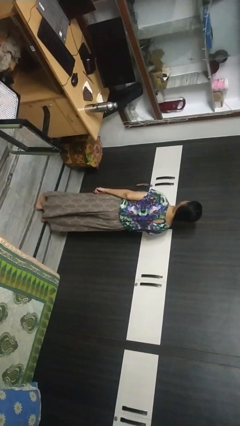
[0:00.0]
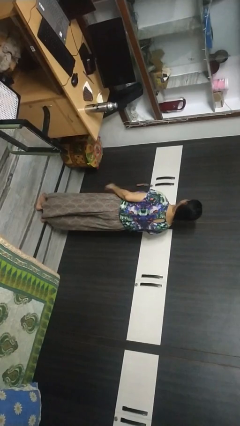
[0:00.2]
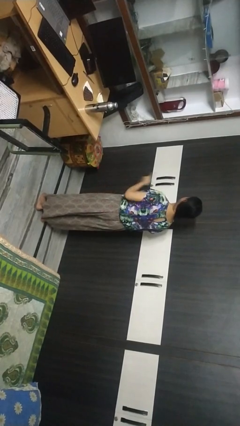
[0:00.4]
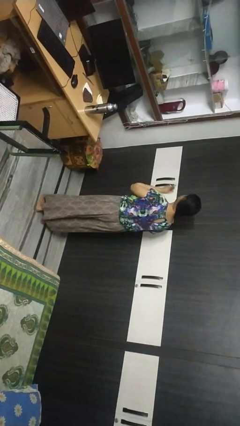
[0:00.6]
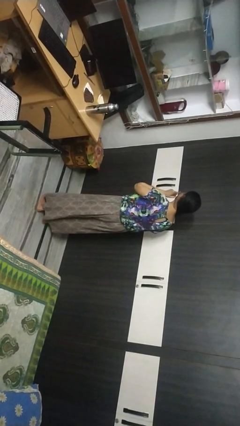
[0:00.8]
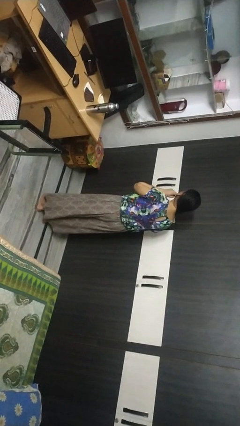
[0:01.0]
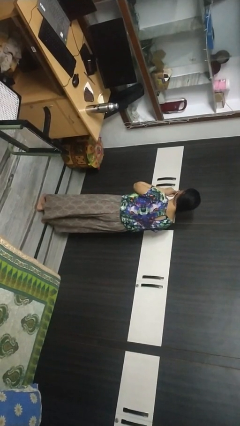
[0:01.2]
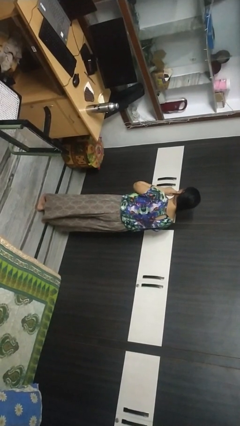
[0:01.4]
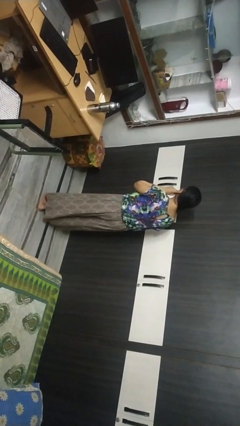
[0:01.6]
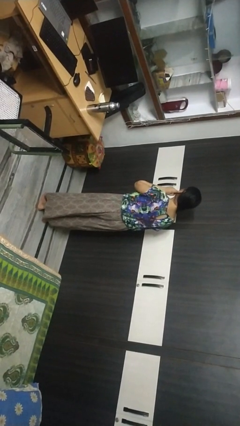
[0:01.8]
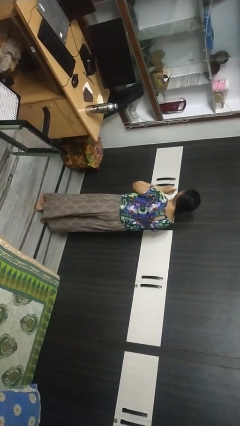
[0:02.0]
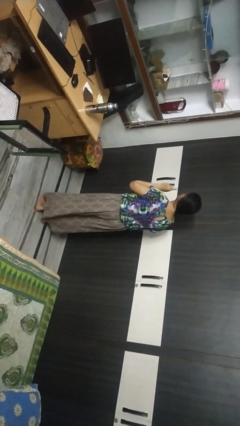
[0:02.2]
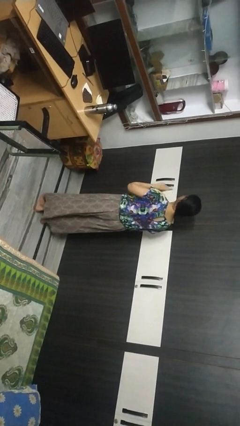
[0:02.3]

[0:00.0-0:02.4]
person gestures listen closely

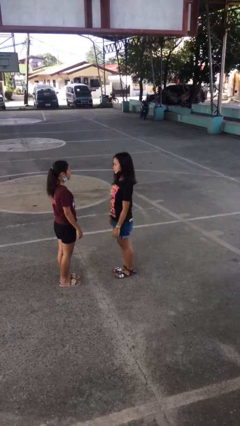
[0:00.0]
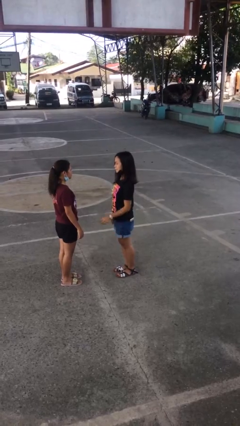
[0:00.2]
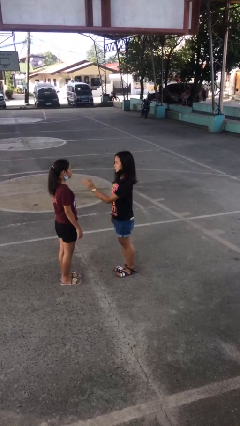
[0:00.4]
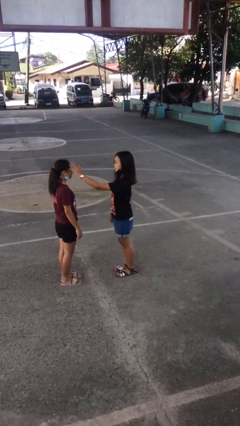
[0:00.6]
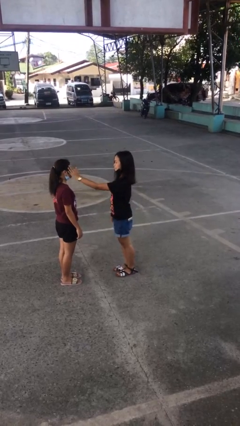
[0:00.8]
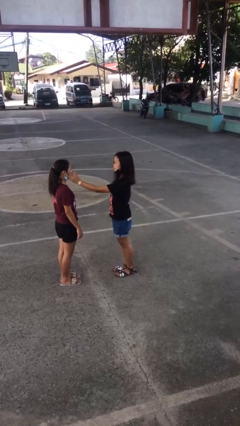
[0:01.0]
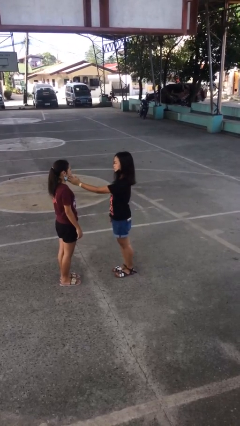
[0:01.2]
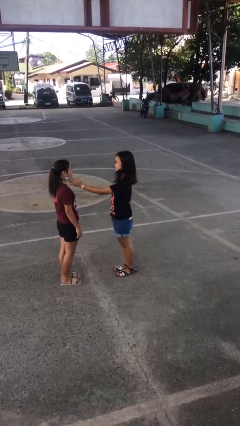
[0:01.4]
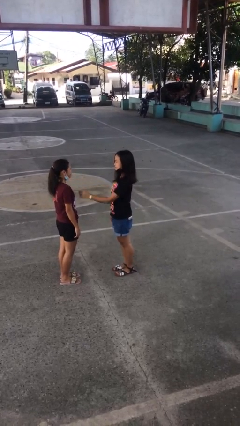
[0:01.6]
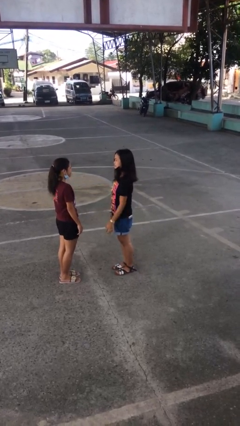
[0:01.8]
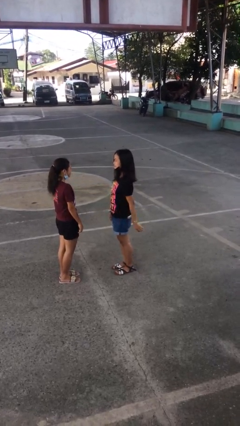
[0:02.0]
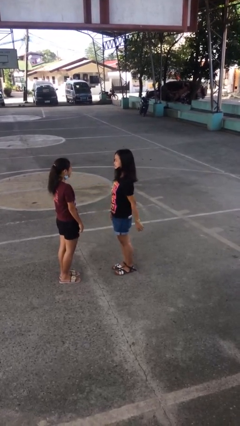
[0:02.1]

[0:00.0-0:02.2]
person touches face of person

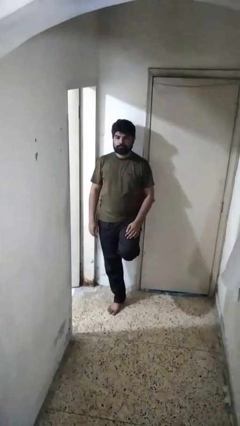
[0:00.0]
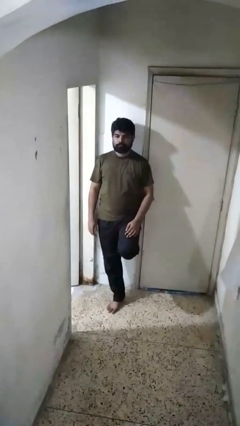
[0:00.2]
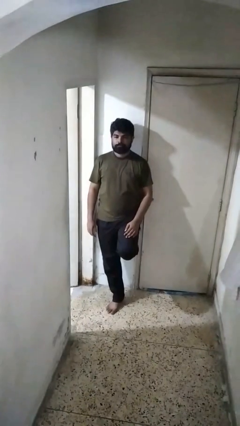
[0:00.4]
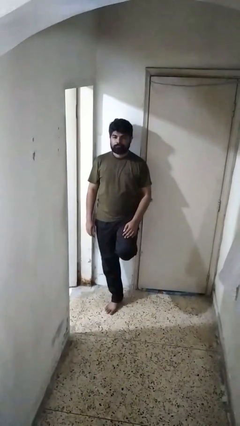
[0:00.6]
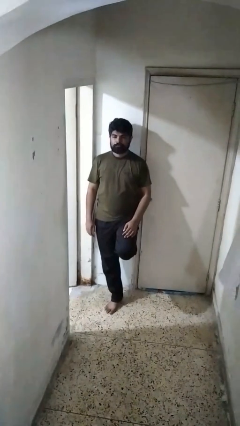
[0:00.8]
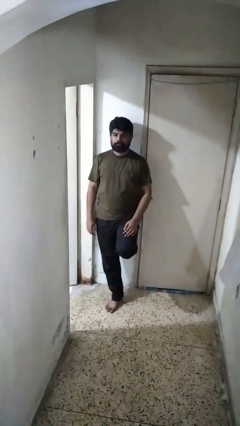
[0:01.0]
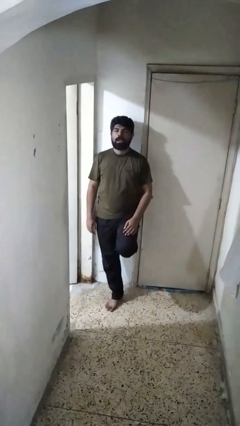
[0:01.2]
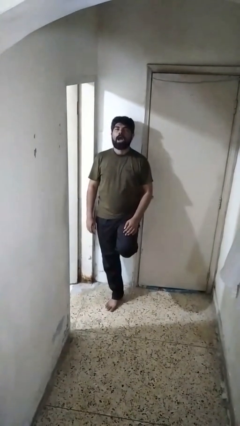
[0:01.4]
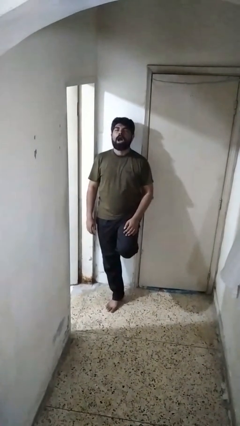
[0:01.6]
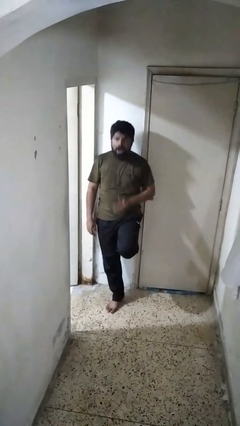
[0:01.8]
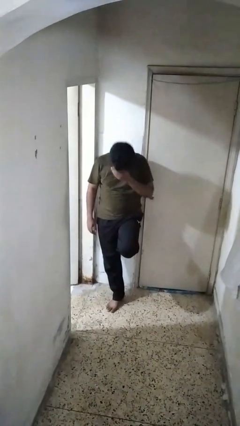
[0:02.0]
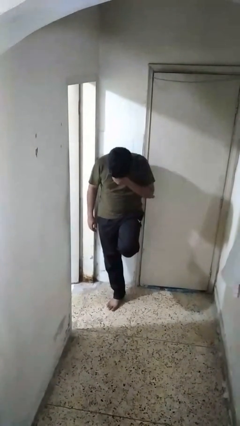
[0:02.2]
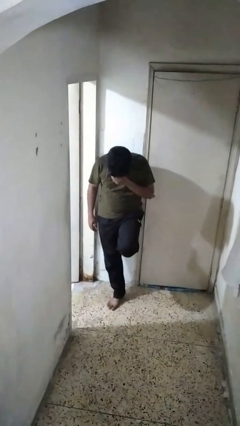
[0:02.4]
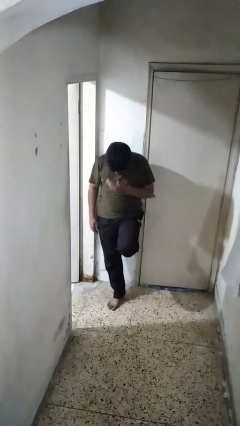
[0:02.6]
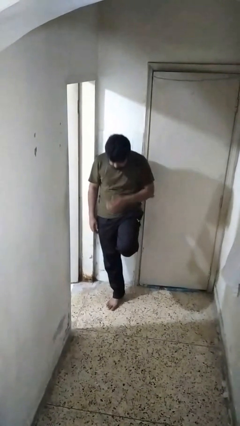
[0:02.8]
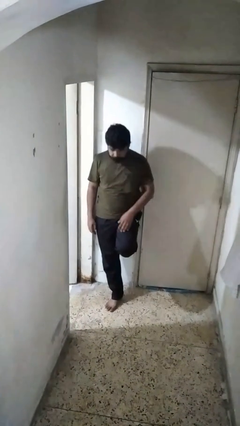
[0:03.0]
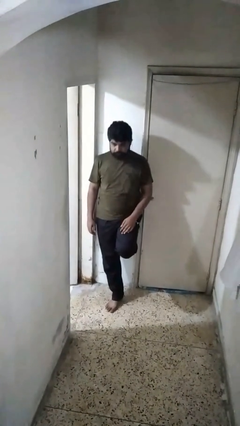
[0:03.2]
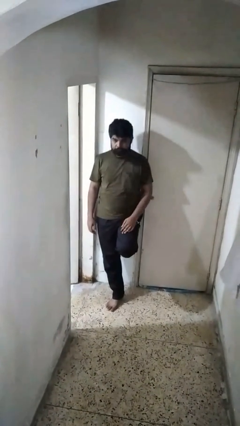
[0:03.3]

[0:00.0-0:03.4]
person sneezes into hand

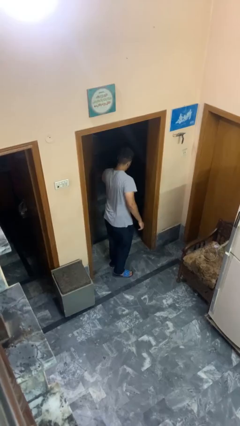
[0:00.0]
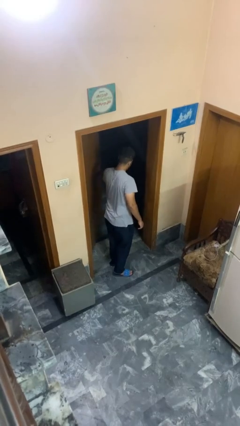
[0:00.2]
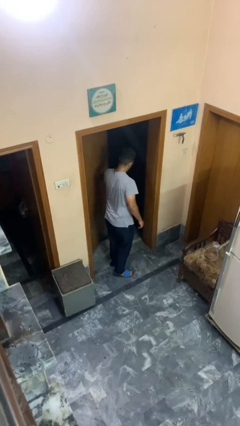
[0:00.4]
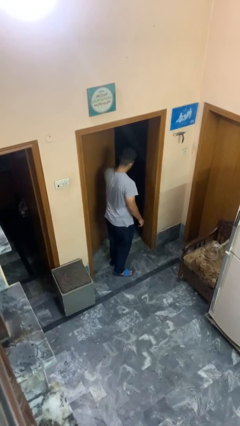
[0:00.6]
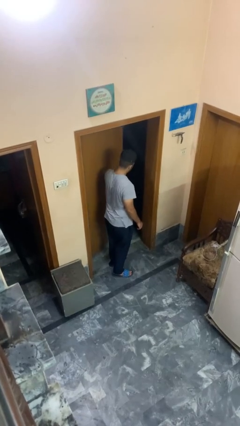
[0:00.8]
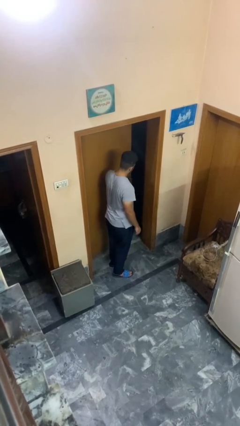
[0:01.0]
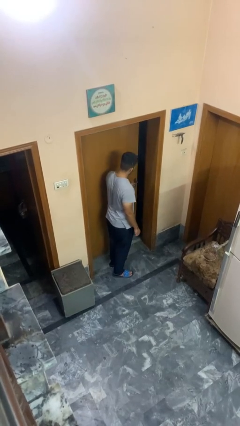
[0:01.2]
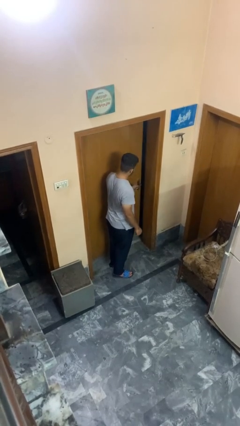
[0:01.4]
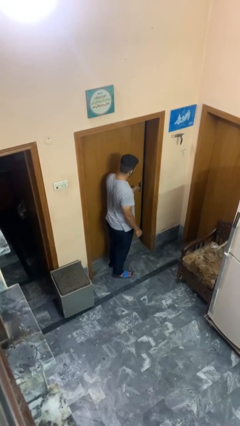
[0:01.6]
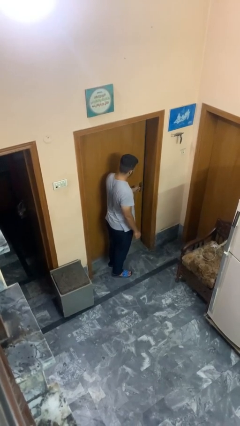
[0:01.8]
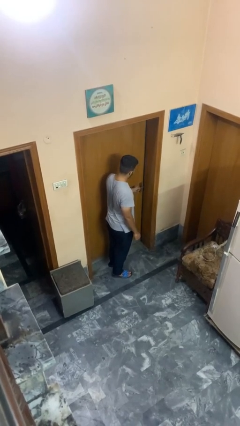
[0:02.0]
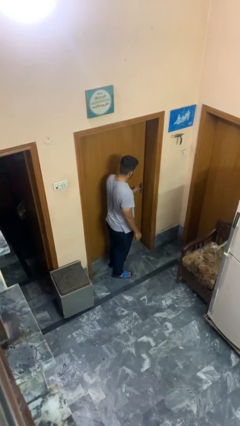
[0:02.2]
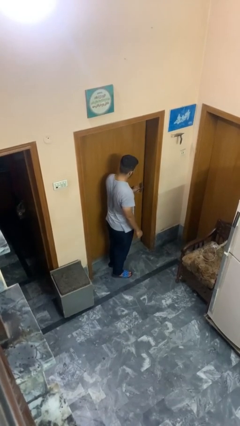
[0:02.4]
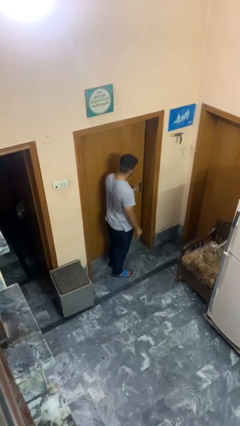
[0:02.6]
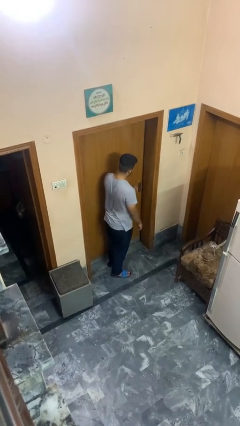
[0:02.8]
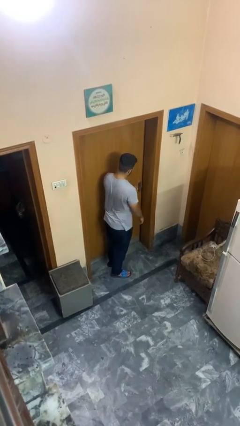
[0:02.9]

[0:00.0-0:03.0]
person closes facility door

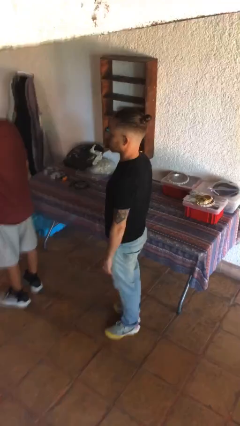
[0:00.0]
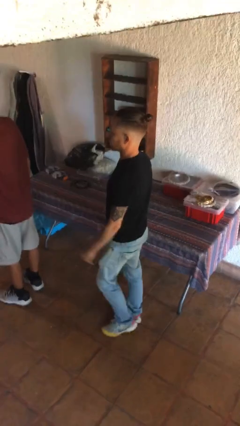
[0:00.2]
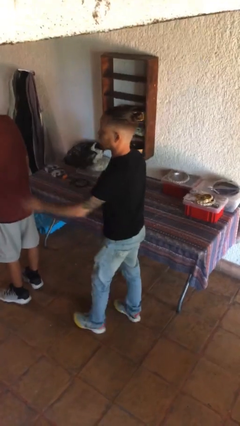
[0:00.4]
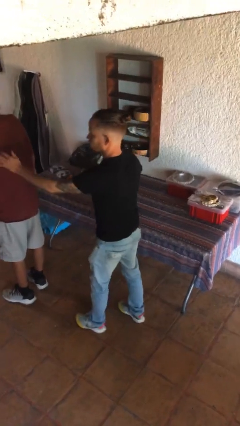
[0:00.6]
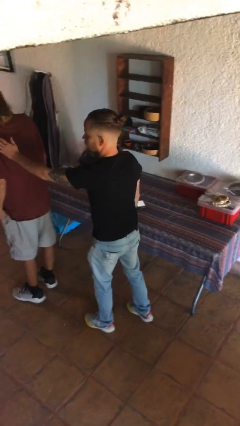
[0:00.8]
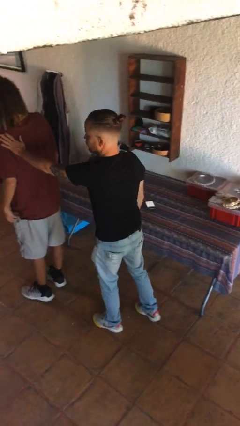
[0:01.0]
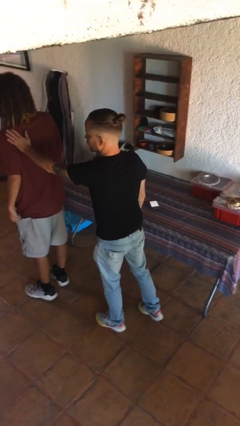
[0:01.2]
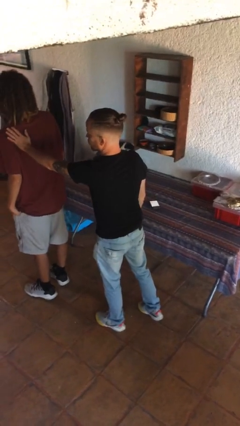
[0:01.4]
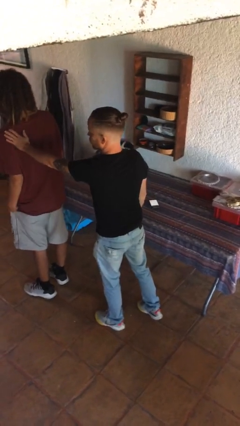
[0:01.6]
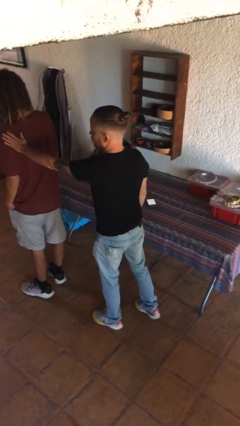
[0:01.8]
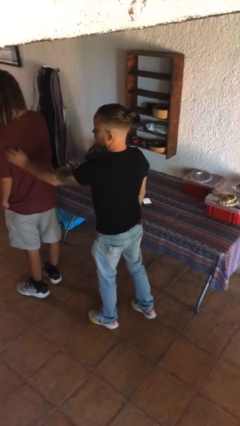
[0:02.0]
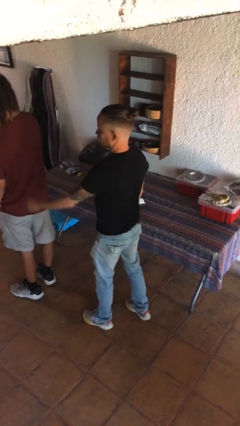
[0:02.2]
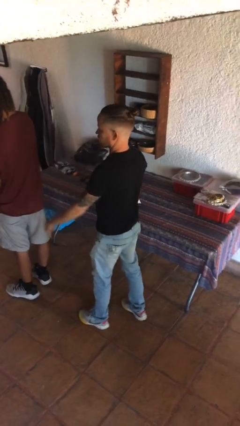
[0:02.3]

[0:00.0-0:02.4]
person touches back of person

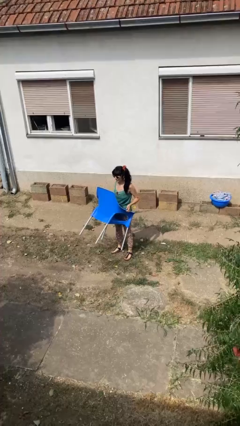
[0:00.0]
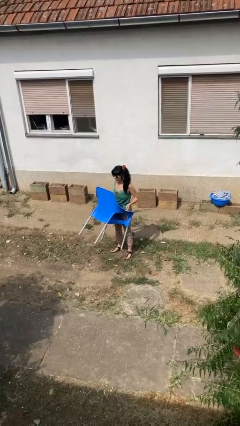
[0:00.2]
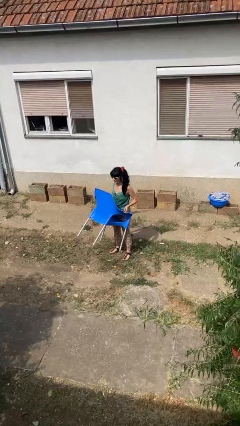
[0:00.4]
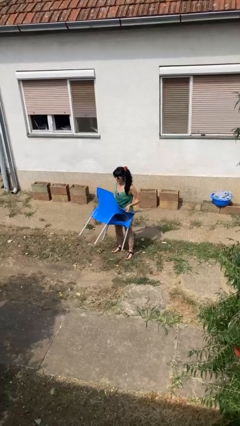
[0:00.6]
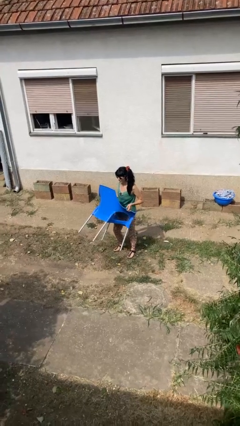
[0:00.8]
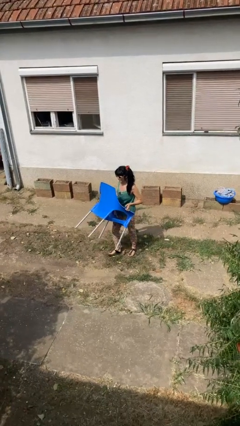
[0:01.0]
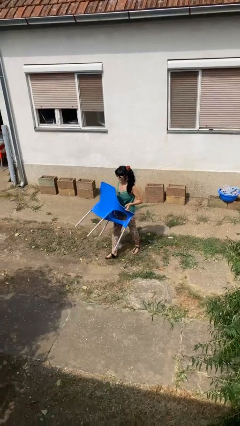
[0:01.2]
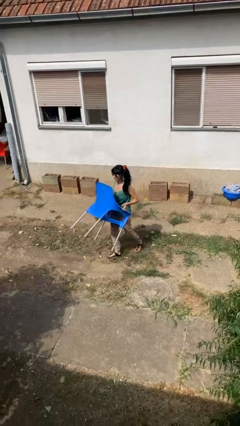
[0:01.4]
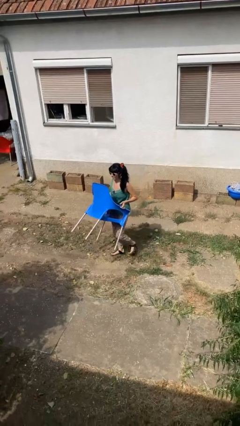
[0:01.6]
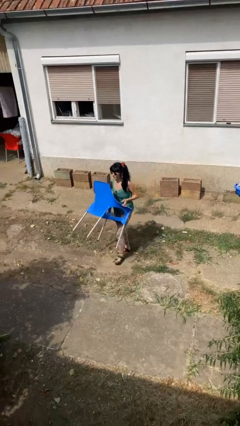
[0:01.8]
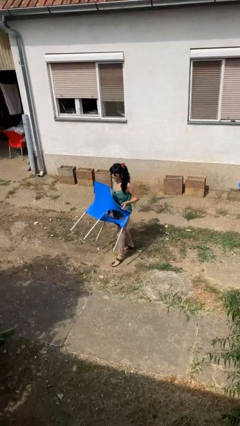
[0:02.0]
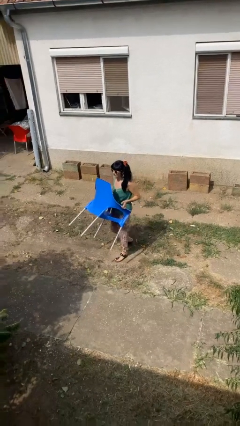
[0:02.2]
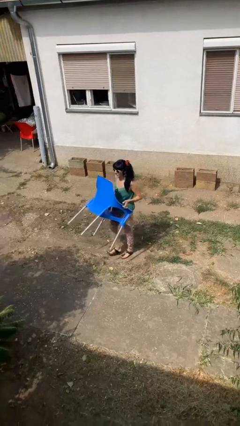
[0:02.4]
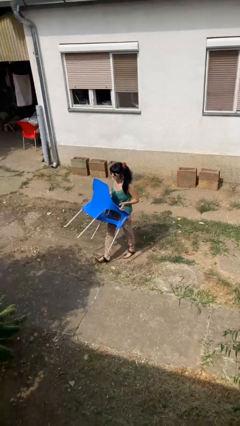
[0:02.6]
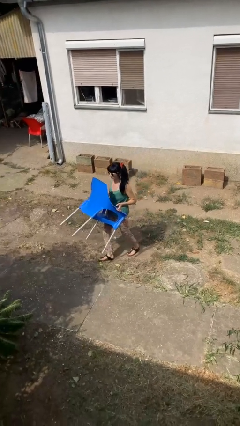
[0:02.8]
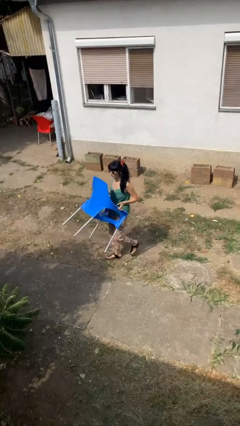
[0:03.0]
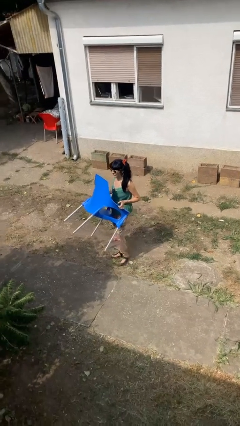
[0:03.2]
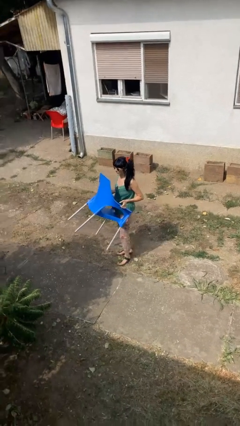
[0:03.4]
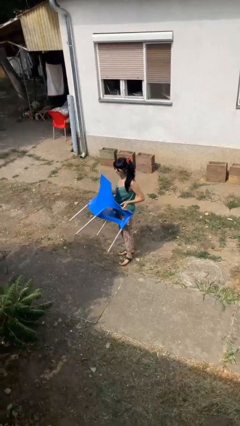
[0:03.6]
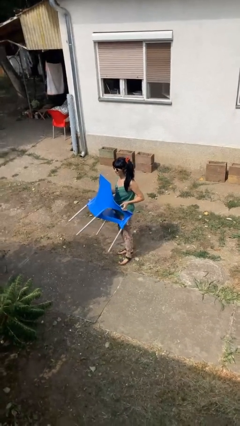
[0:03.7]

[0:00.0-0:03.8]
person carries furniture

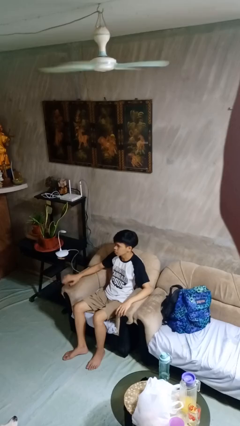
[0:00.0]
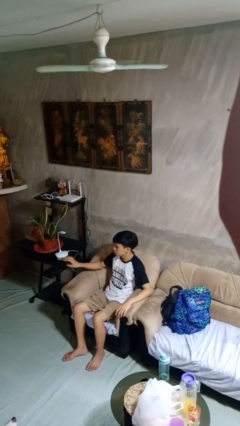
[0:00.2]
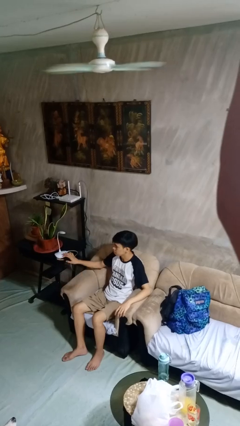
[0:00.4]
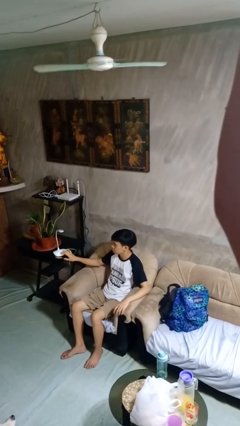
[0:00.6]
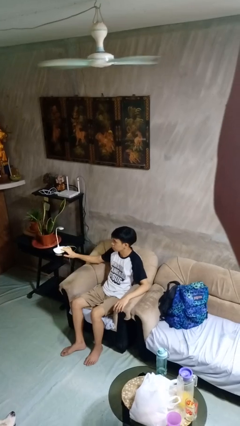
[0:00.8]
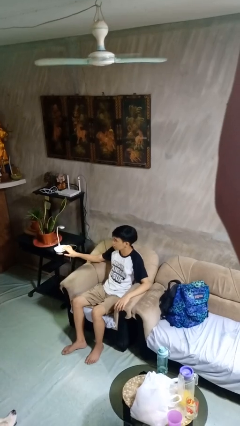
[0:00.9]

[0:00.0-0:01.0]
person turns on lamp
